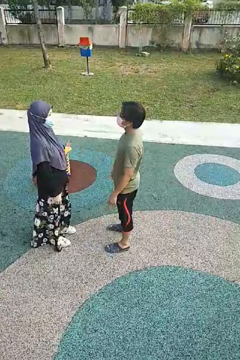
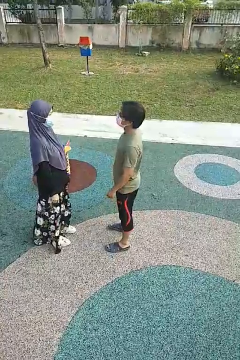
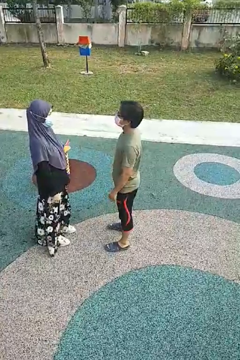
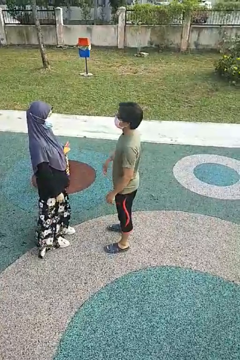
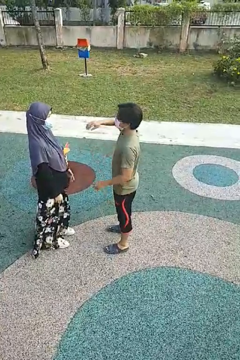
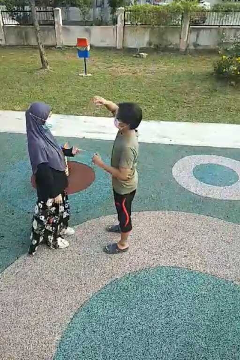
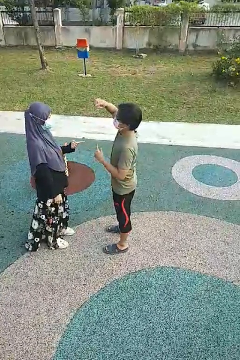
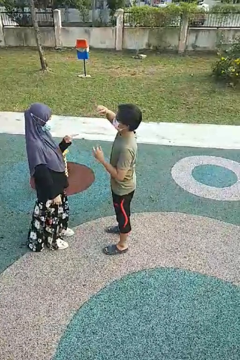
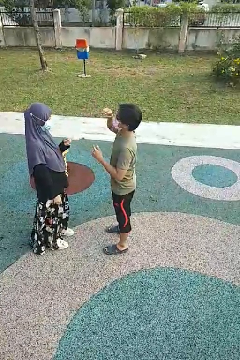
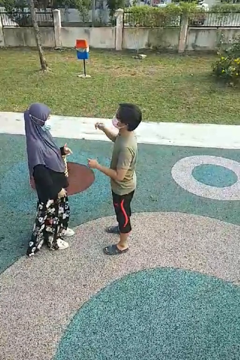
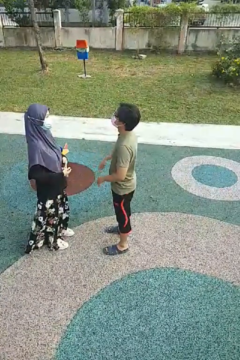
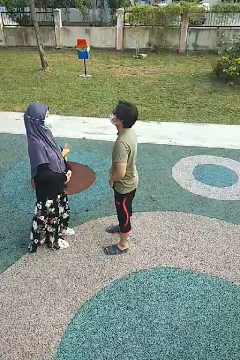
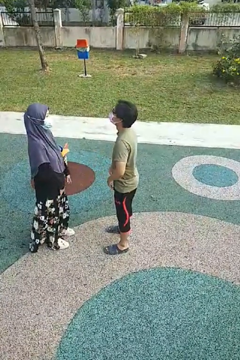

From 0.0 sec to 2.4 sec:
person talks to person

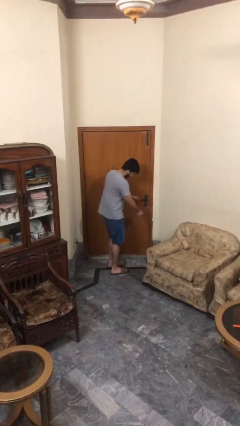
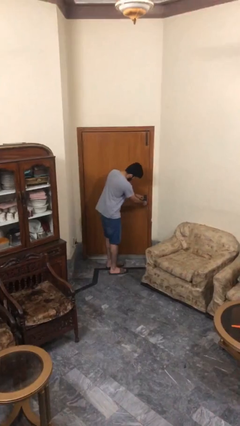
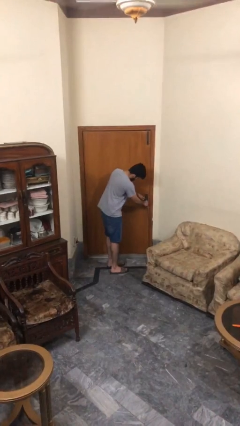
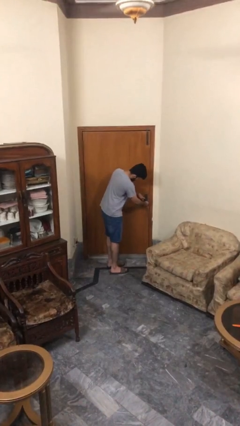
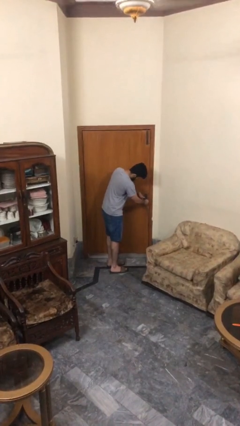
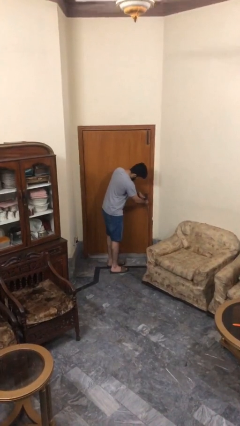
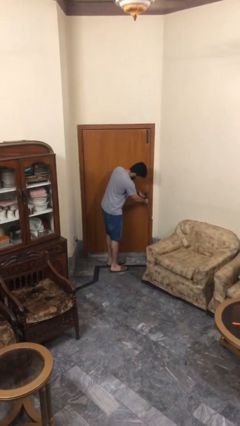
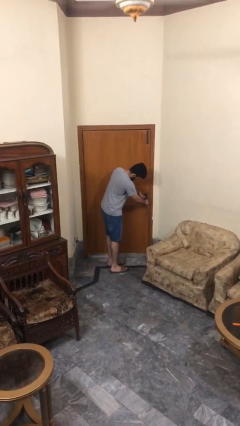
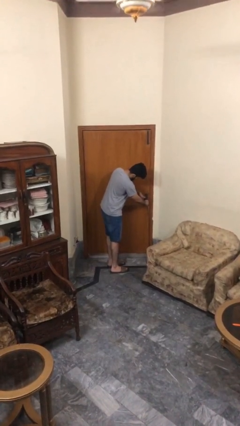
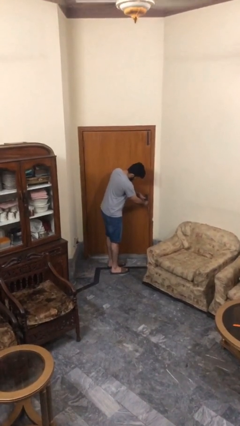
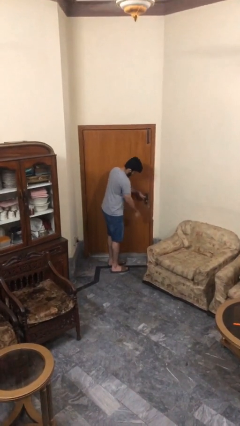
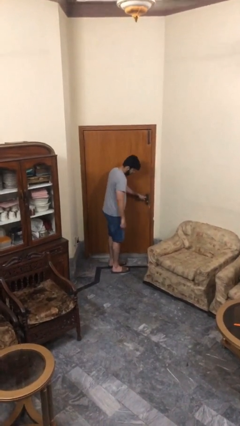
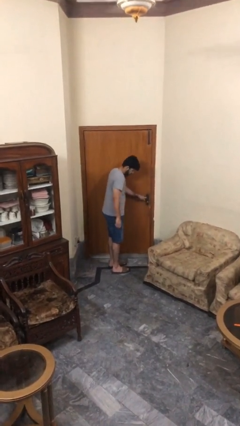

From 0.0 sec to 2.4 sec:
person unlocks door with keys

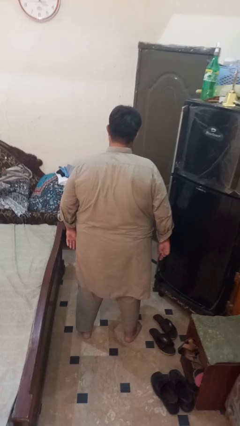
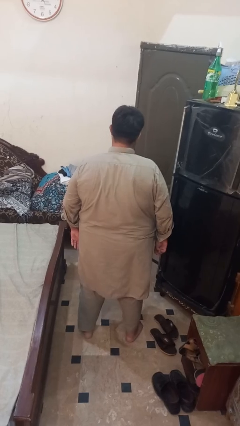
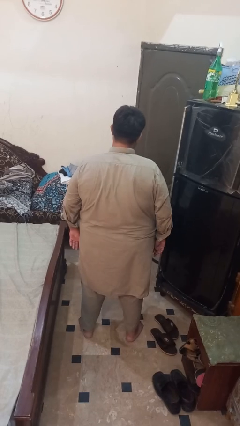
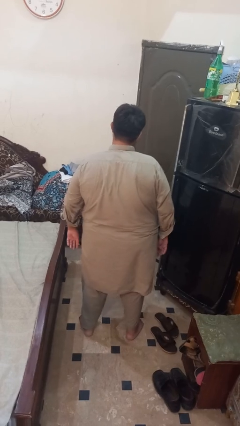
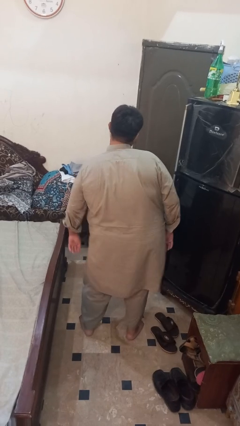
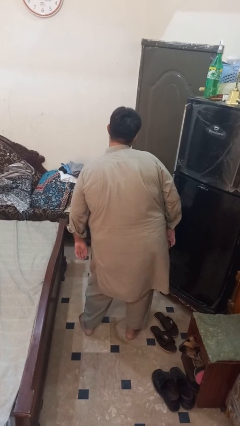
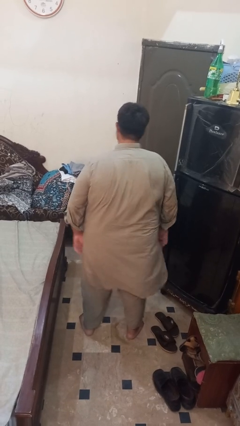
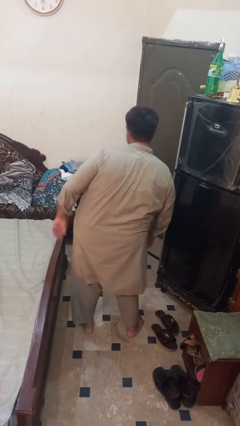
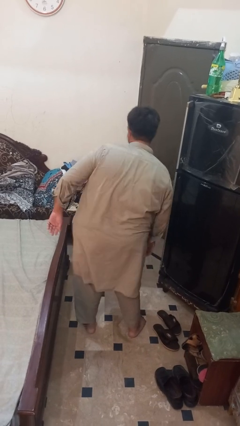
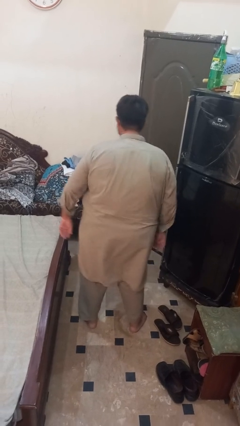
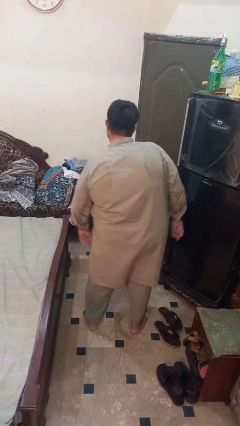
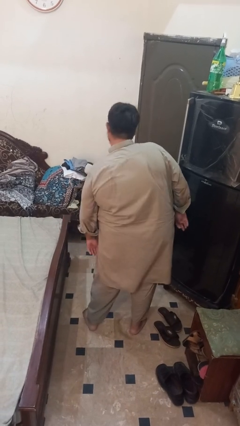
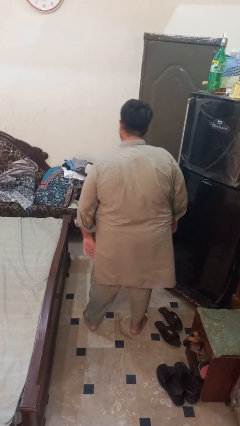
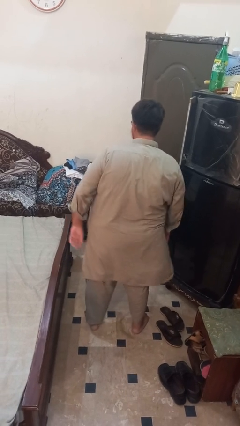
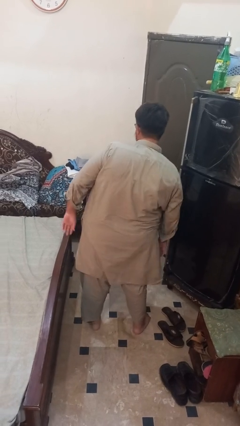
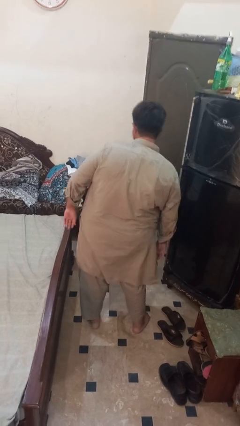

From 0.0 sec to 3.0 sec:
person wiggles hips

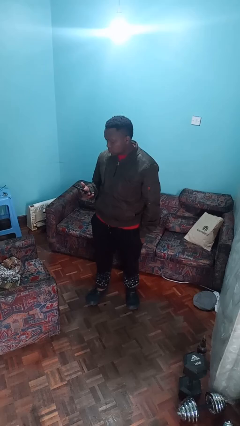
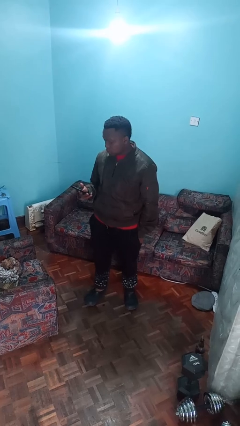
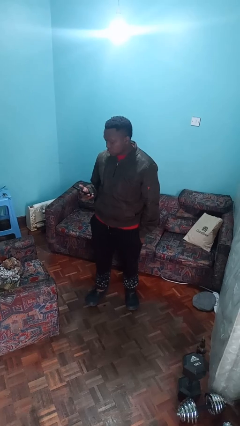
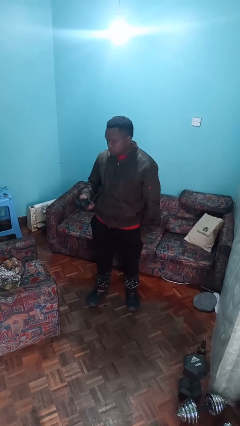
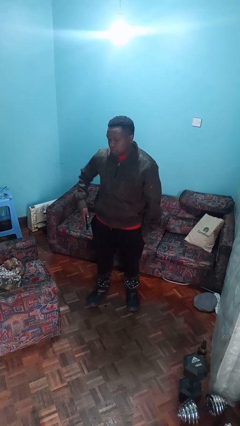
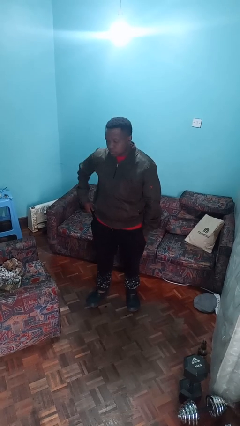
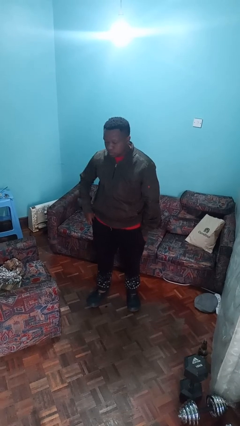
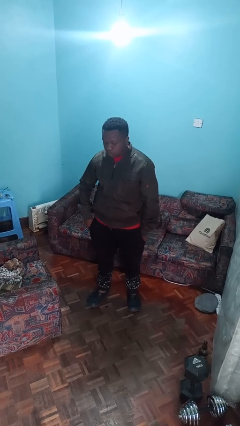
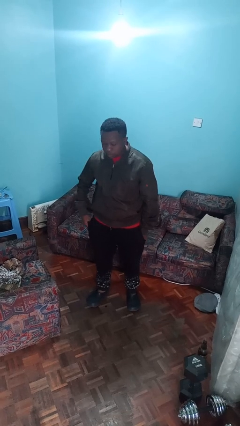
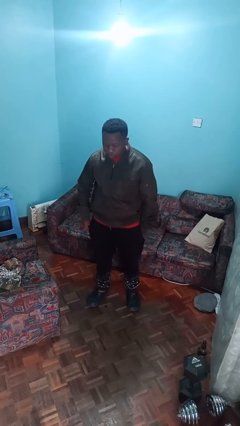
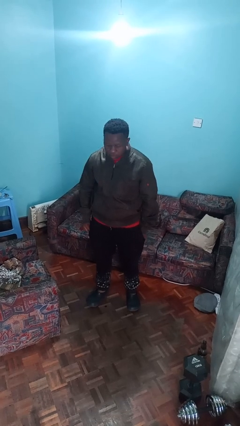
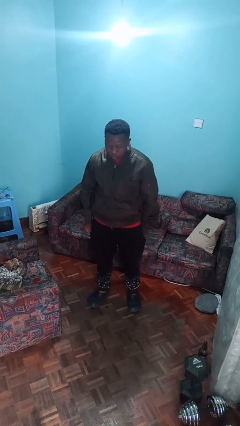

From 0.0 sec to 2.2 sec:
person puts phone into pocket

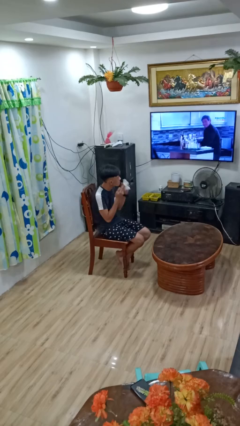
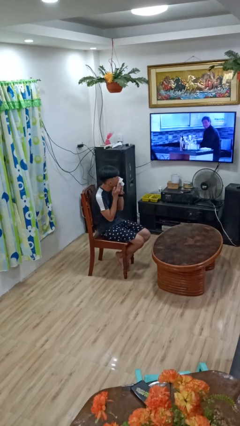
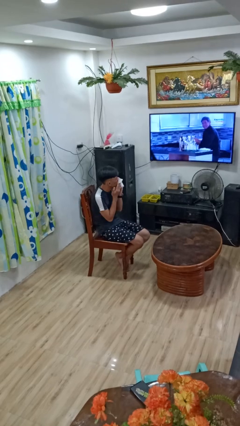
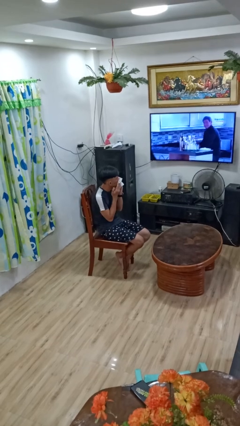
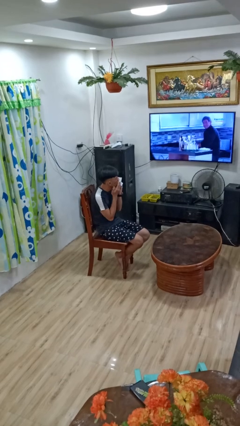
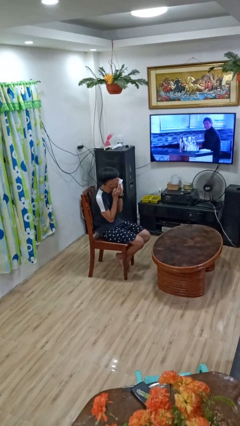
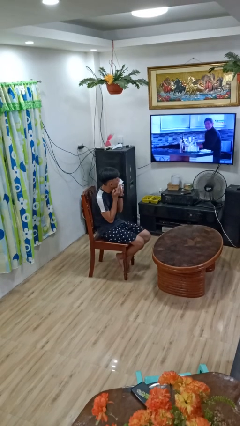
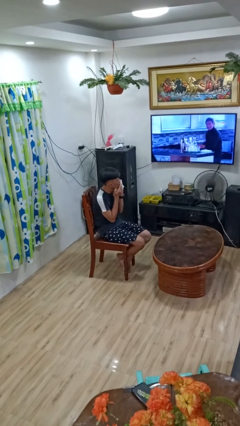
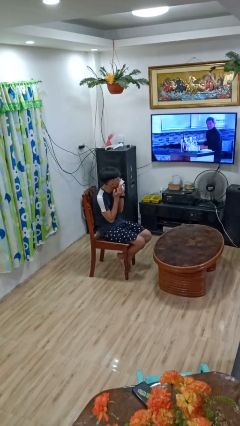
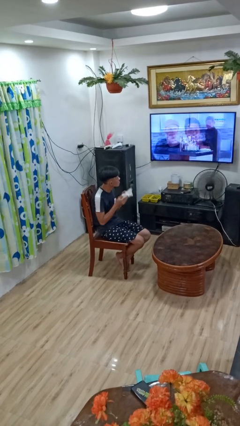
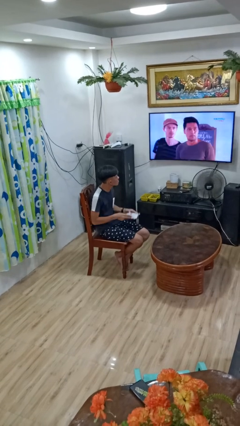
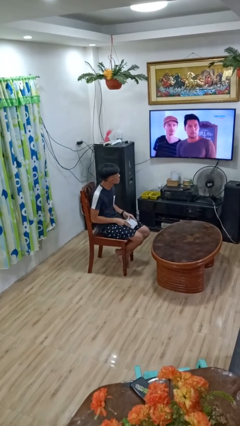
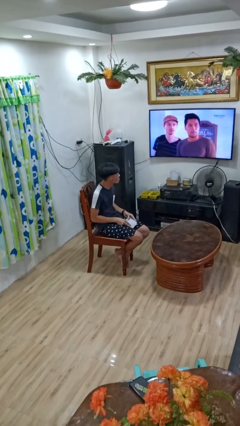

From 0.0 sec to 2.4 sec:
person wipes mouth with napkin

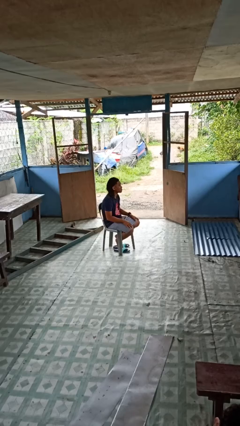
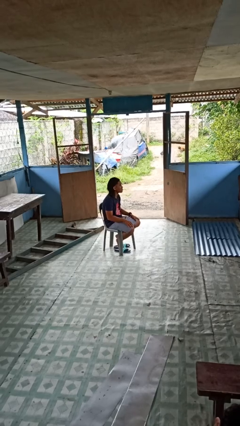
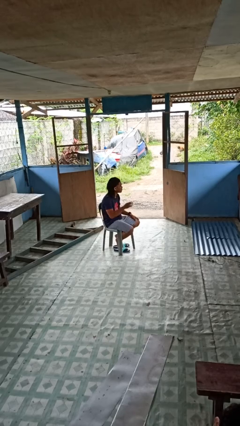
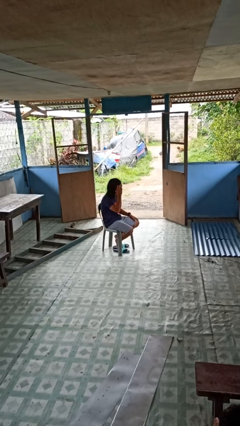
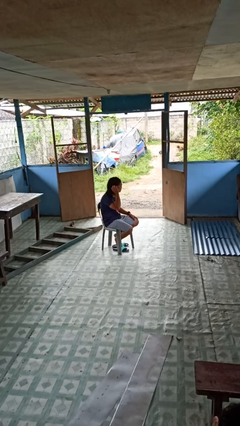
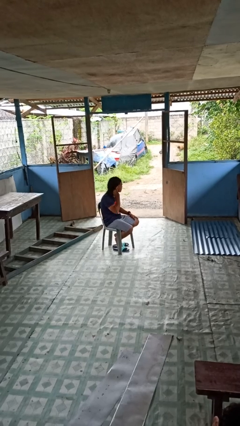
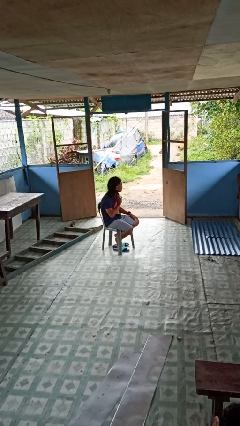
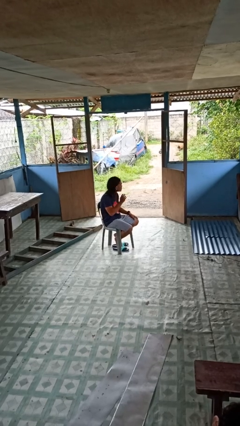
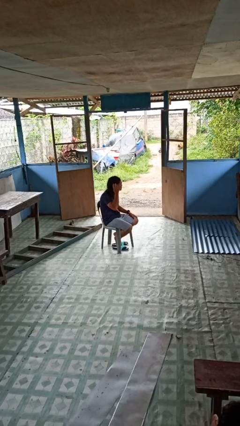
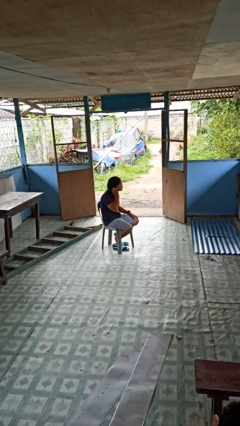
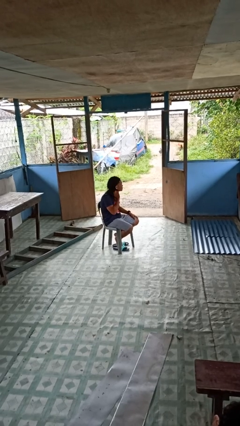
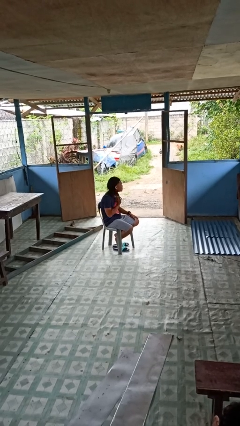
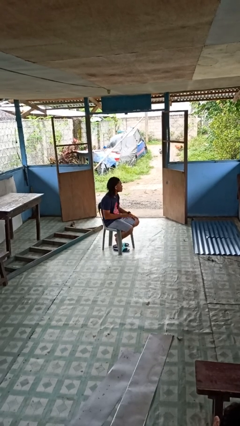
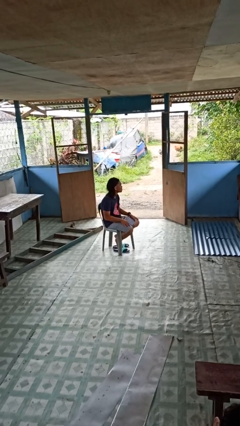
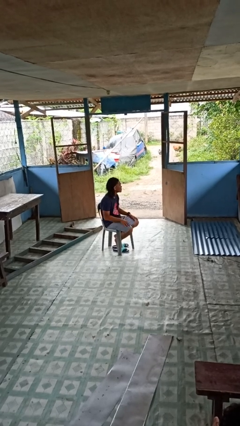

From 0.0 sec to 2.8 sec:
person strokes hair

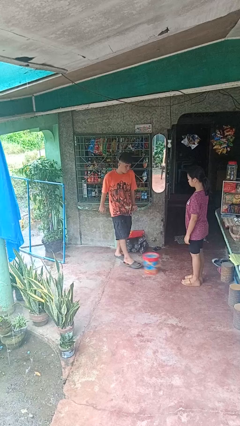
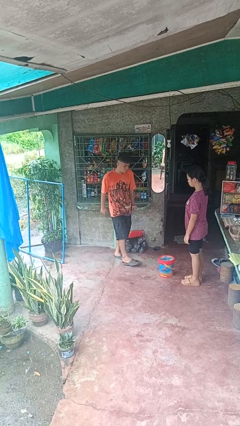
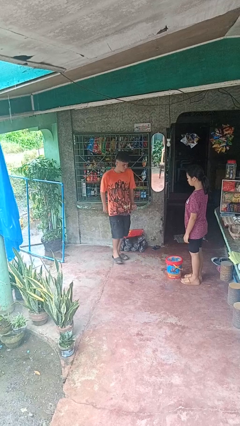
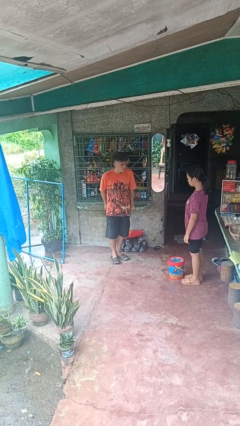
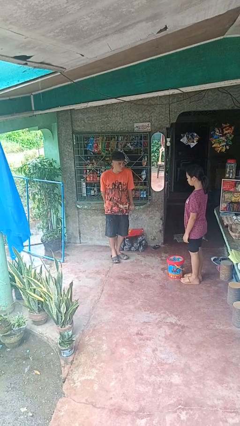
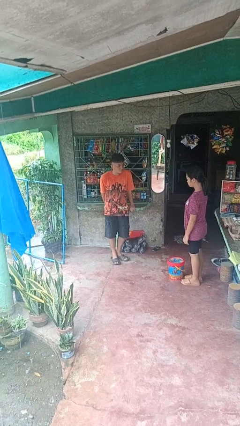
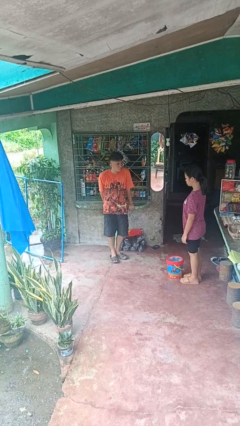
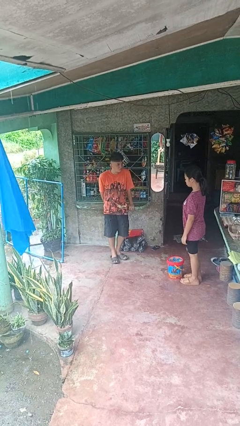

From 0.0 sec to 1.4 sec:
person kicks object to person

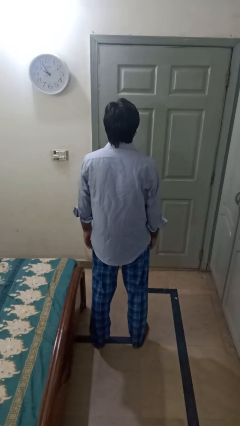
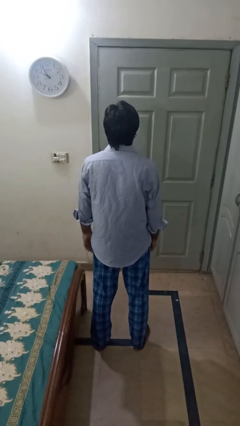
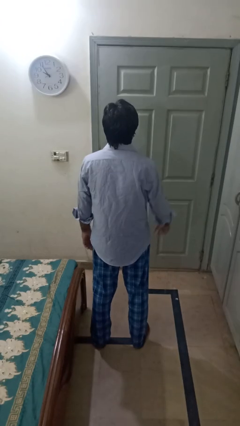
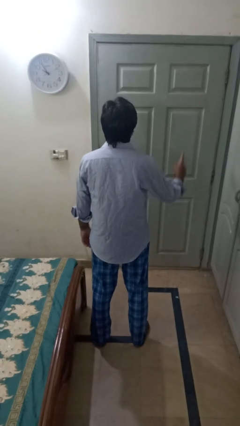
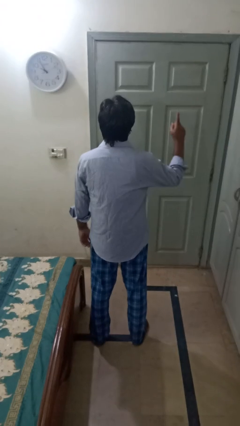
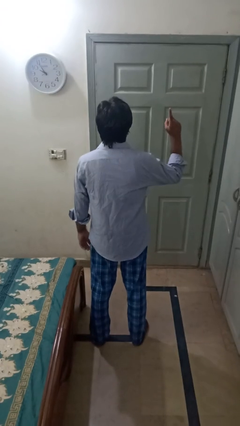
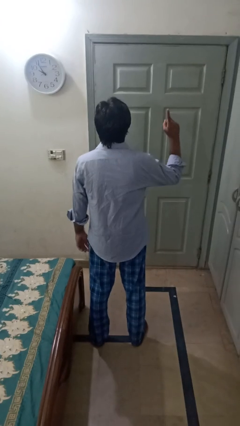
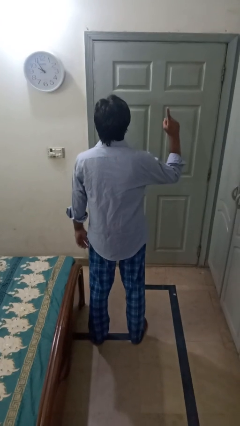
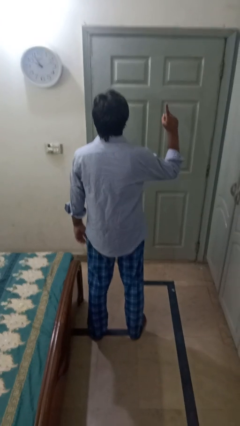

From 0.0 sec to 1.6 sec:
person gestures number one
